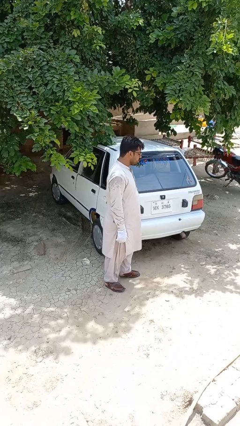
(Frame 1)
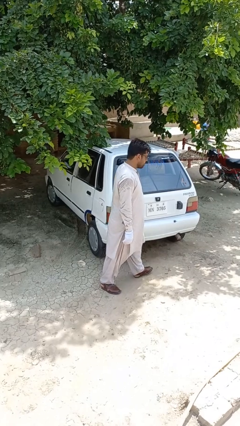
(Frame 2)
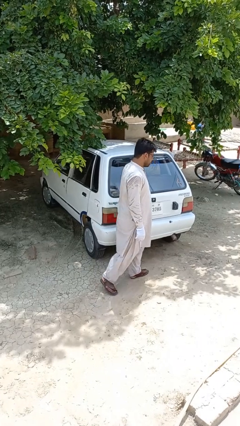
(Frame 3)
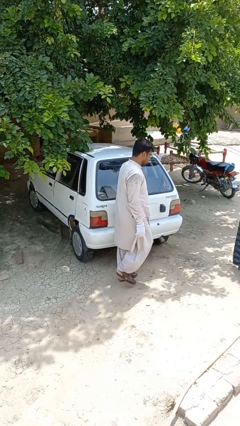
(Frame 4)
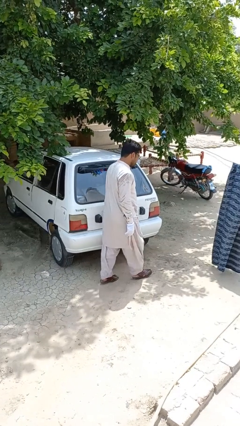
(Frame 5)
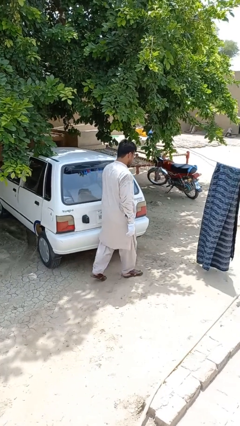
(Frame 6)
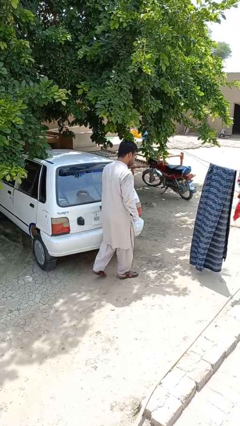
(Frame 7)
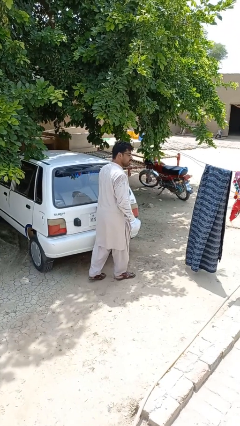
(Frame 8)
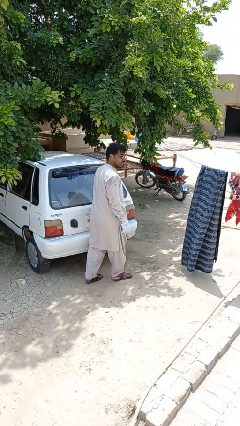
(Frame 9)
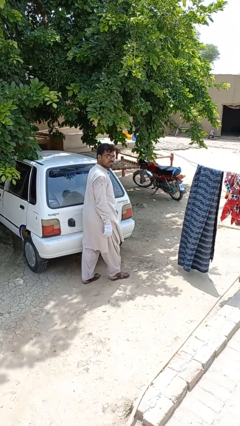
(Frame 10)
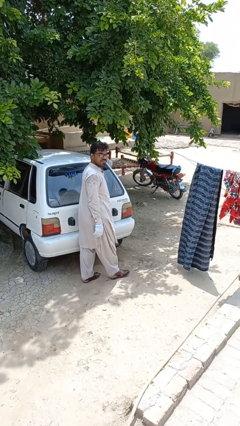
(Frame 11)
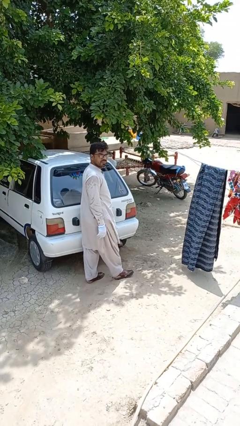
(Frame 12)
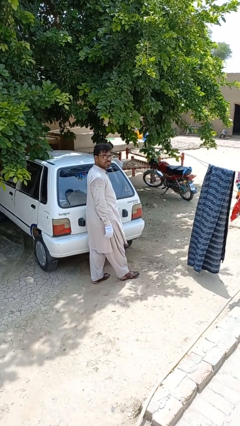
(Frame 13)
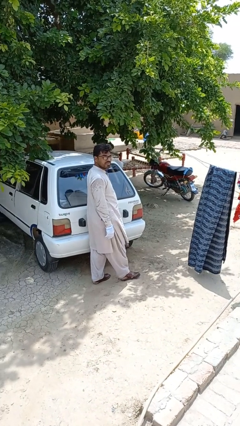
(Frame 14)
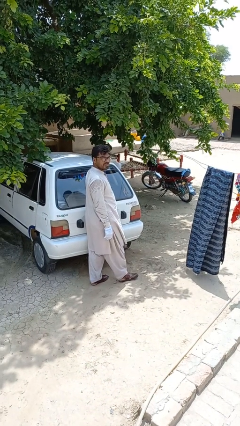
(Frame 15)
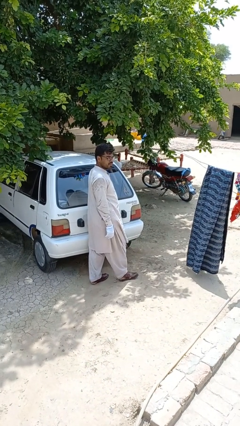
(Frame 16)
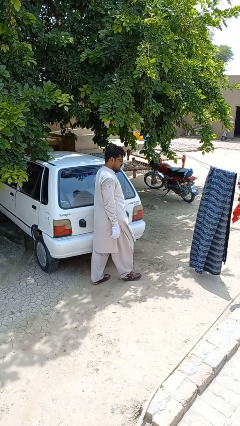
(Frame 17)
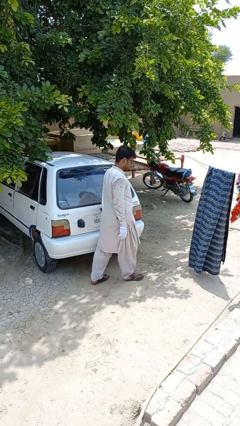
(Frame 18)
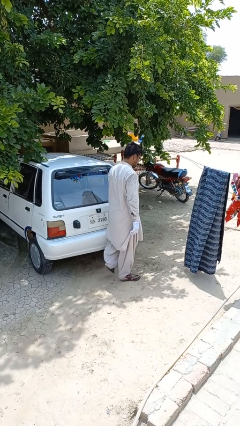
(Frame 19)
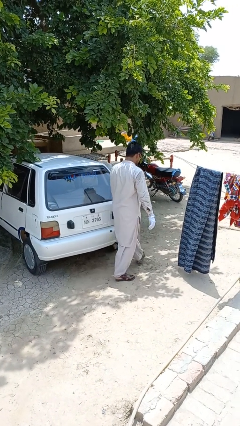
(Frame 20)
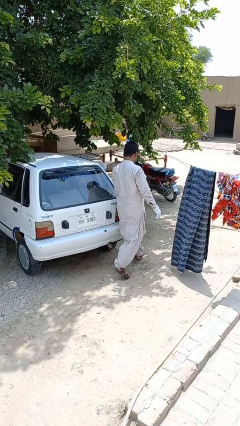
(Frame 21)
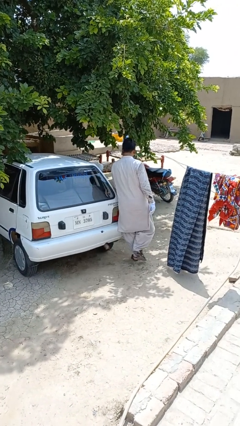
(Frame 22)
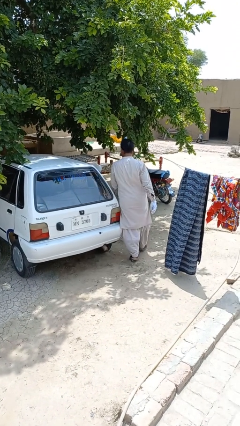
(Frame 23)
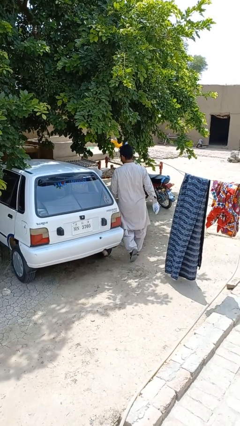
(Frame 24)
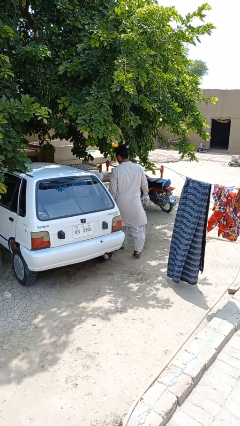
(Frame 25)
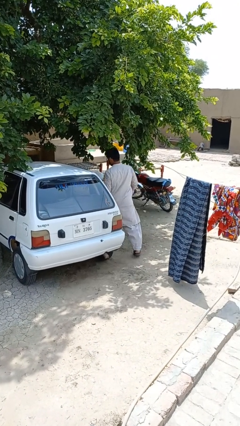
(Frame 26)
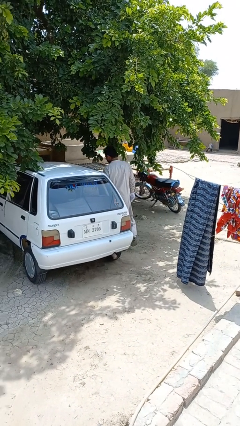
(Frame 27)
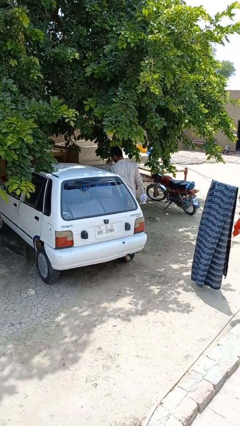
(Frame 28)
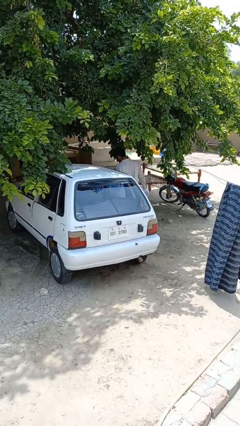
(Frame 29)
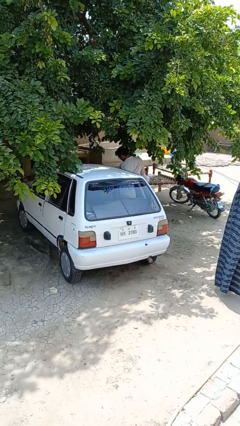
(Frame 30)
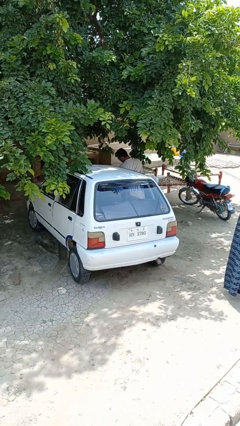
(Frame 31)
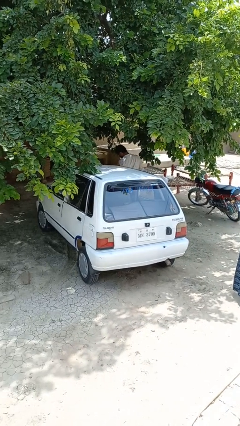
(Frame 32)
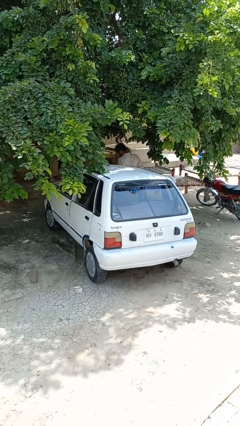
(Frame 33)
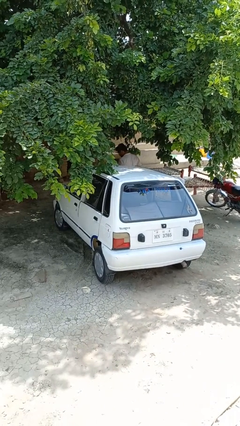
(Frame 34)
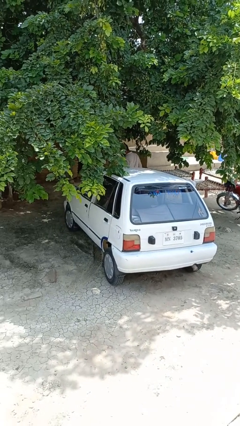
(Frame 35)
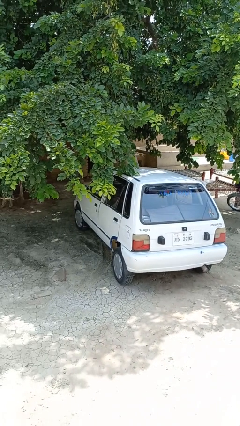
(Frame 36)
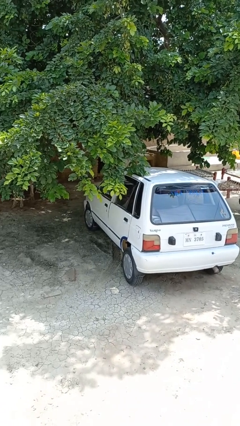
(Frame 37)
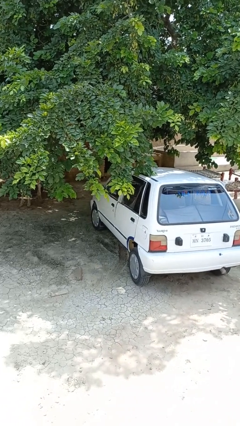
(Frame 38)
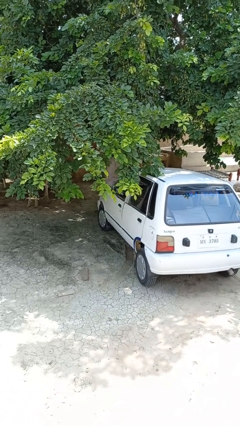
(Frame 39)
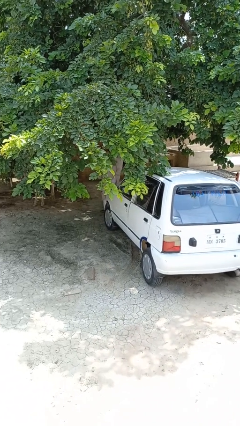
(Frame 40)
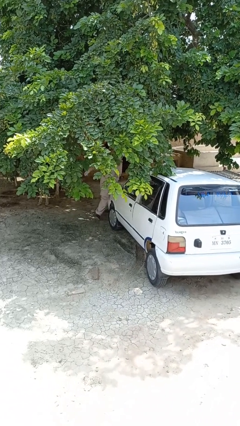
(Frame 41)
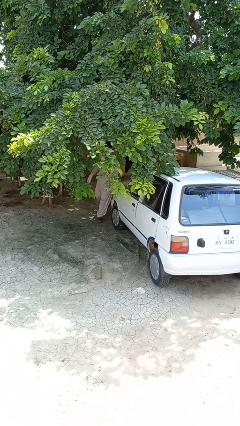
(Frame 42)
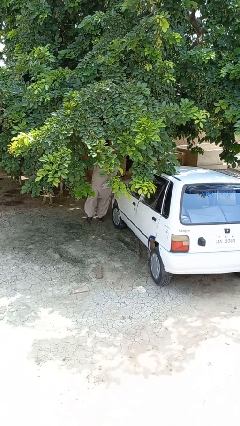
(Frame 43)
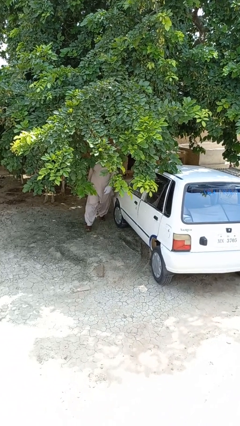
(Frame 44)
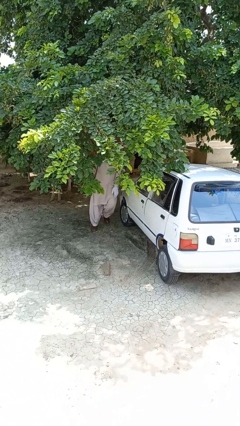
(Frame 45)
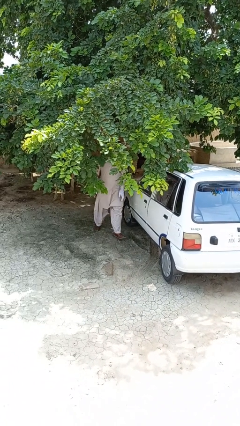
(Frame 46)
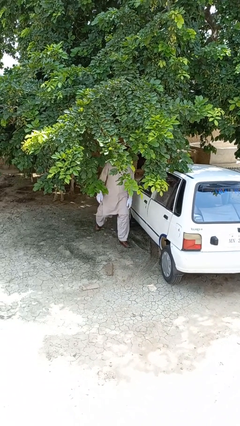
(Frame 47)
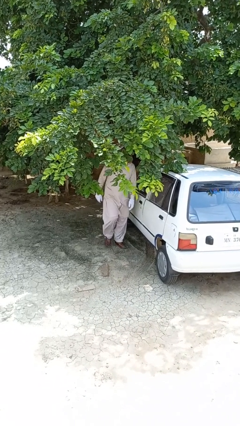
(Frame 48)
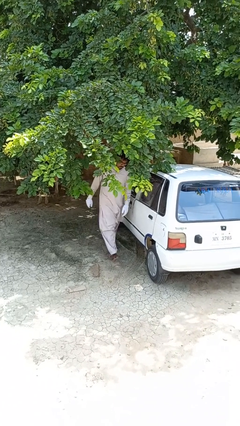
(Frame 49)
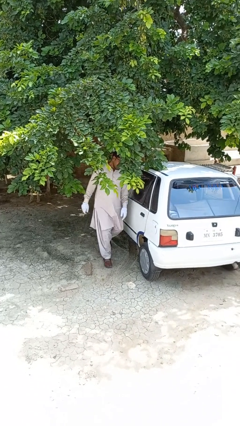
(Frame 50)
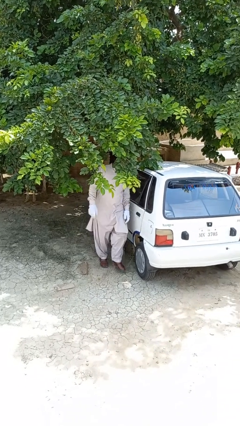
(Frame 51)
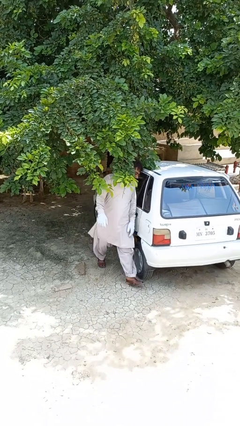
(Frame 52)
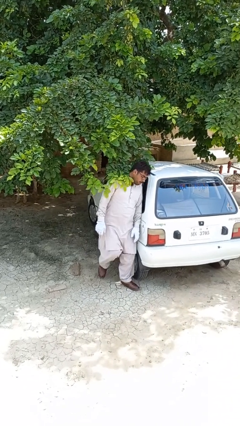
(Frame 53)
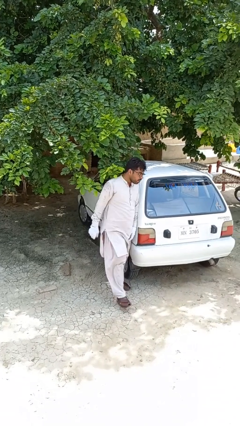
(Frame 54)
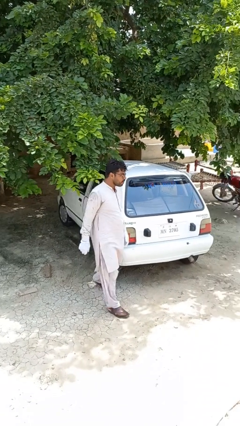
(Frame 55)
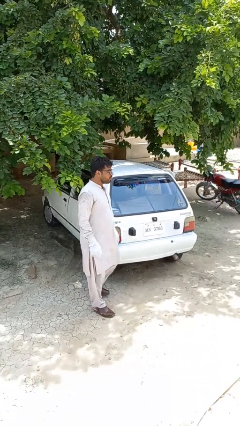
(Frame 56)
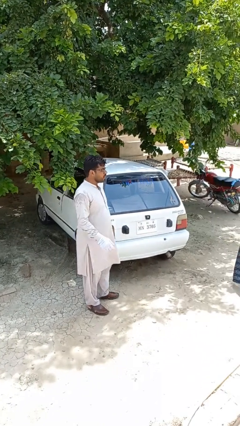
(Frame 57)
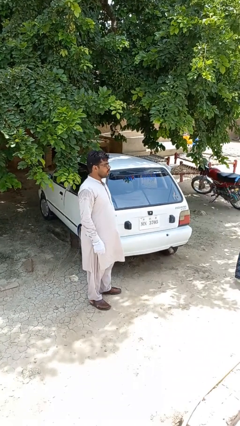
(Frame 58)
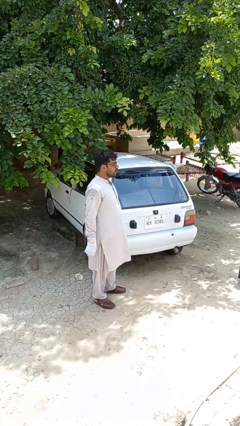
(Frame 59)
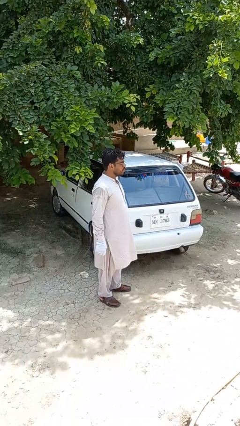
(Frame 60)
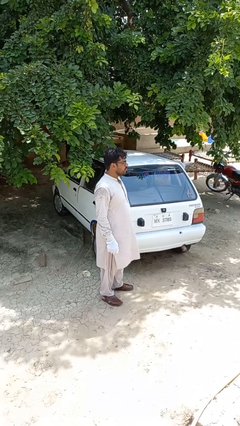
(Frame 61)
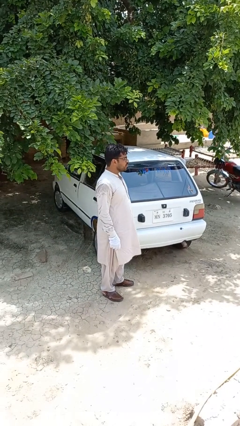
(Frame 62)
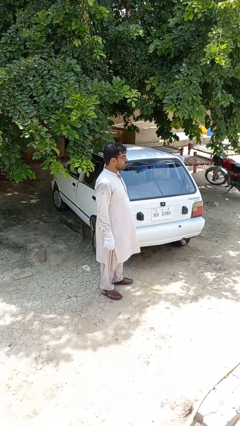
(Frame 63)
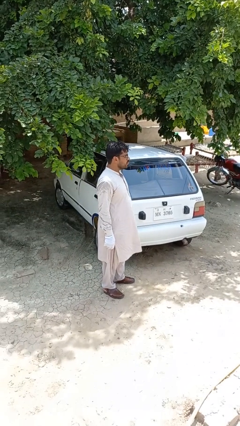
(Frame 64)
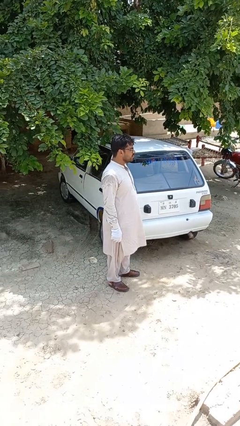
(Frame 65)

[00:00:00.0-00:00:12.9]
person walks around car

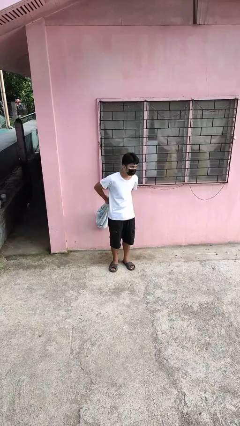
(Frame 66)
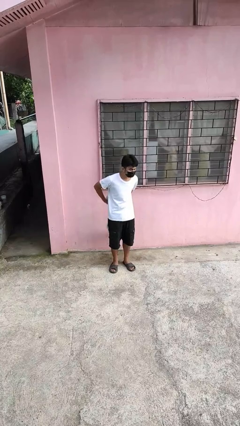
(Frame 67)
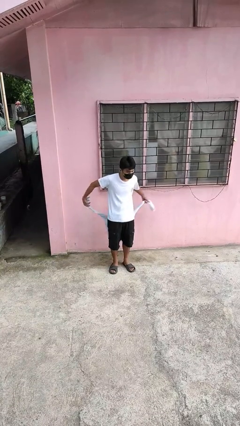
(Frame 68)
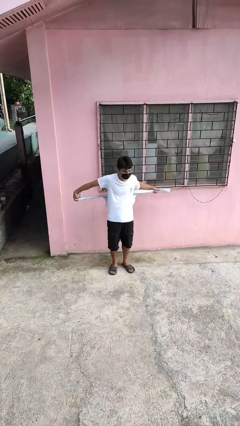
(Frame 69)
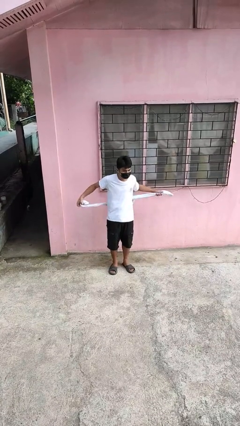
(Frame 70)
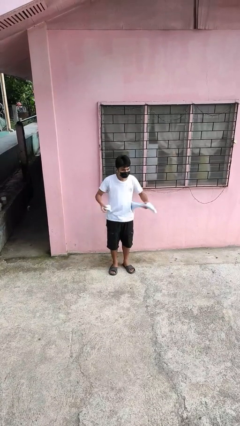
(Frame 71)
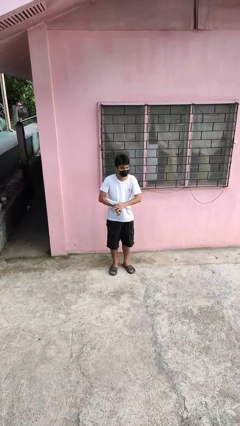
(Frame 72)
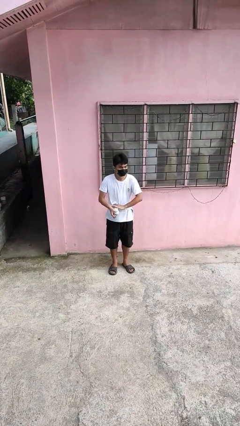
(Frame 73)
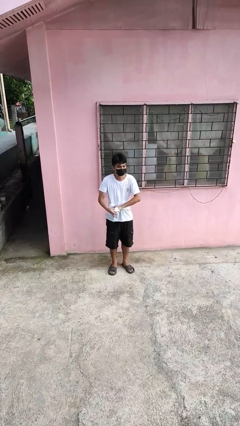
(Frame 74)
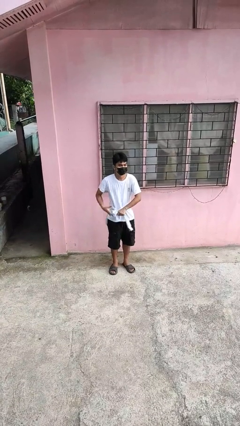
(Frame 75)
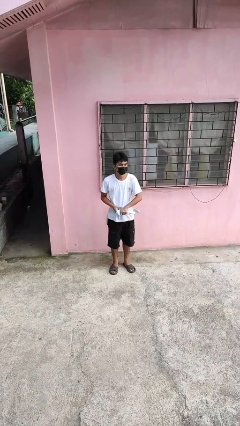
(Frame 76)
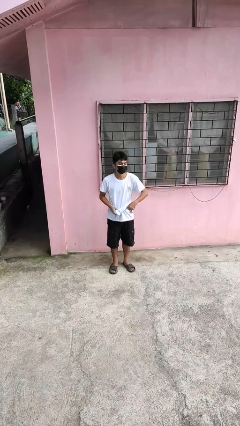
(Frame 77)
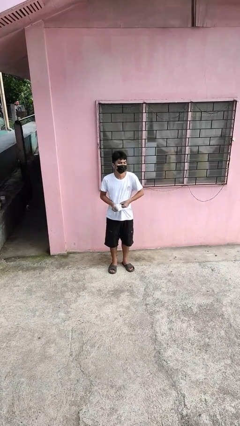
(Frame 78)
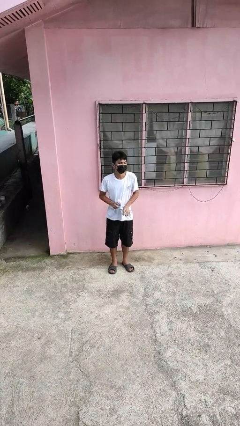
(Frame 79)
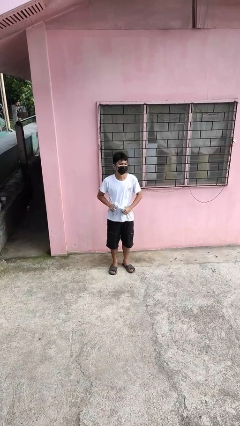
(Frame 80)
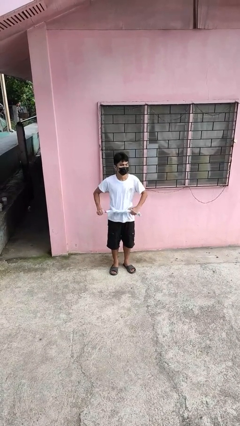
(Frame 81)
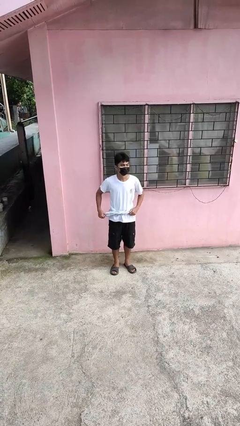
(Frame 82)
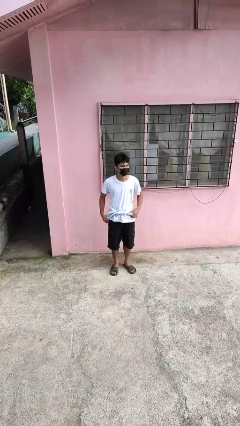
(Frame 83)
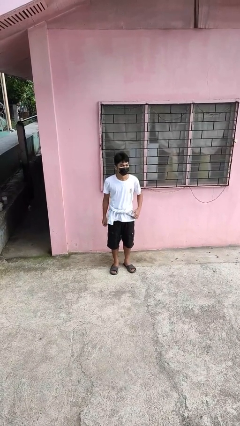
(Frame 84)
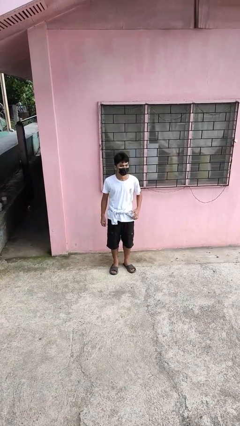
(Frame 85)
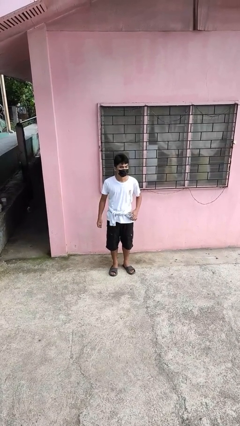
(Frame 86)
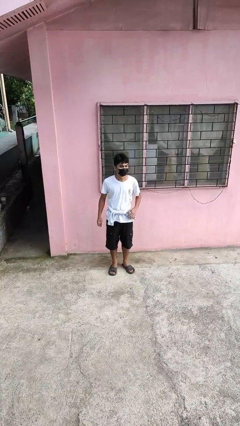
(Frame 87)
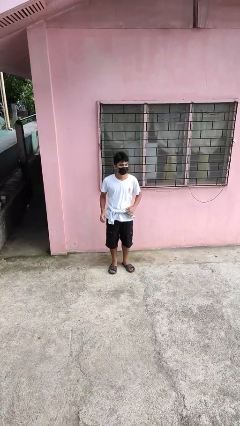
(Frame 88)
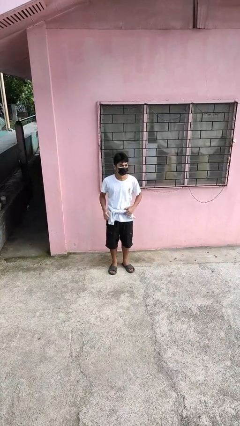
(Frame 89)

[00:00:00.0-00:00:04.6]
person ties jacket around waist

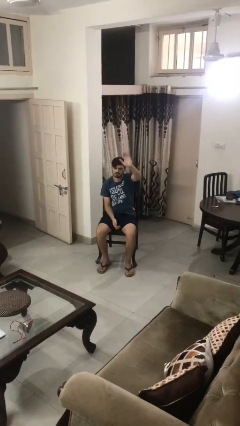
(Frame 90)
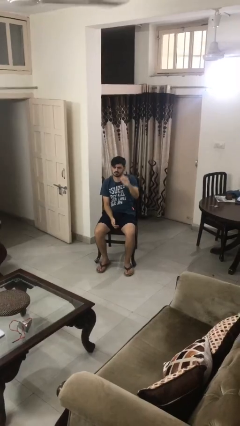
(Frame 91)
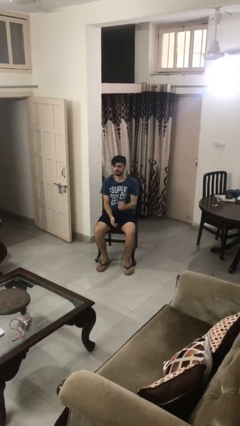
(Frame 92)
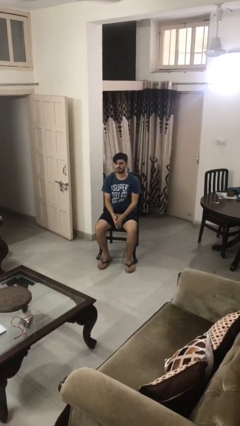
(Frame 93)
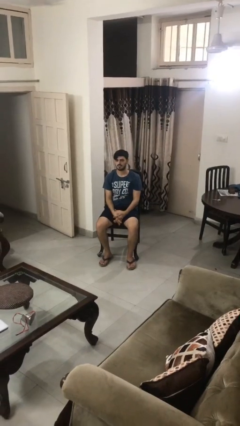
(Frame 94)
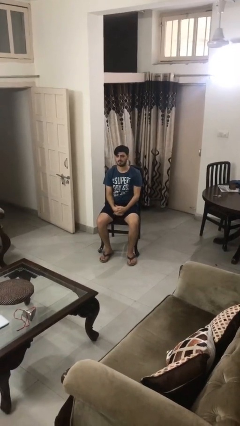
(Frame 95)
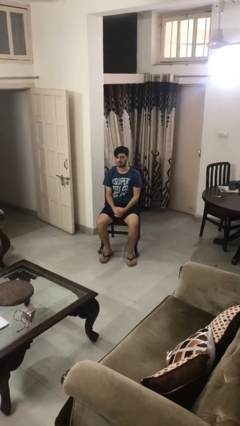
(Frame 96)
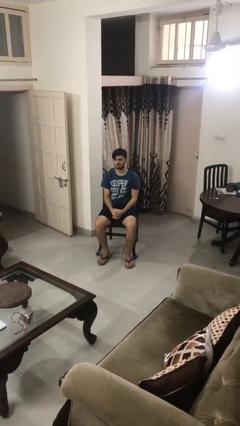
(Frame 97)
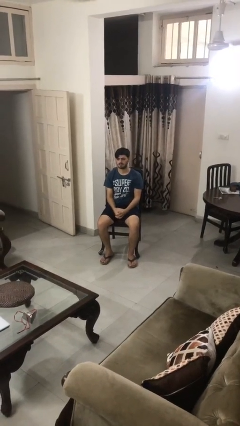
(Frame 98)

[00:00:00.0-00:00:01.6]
person gestures lower hand
